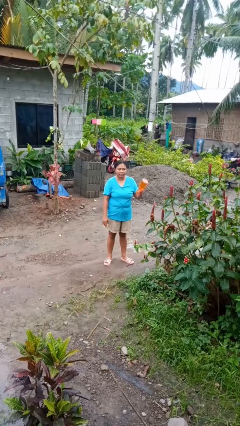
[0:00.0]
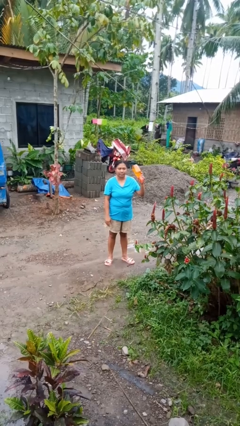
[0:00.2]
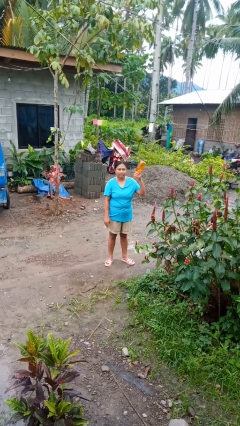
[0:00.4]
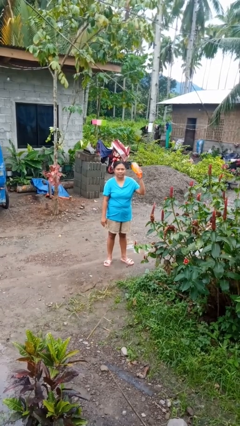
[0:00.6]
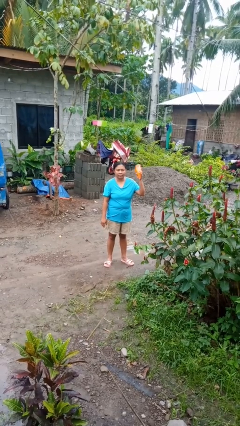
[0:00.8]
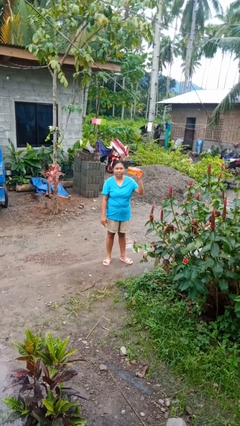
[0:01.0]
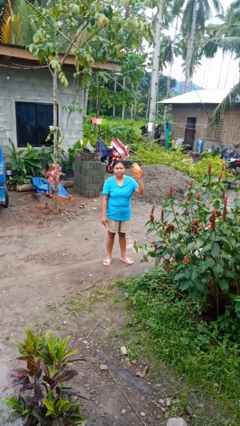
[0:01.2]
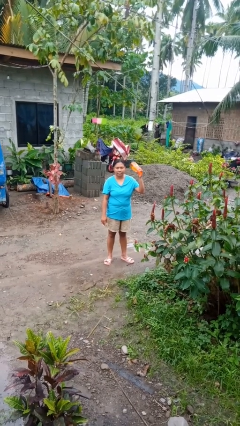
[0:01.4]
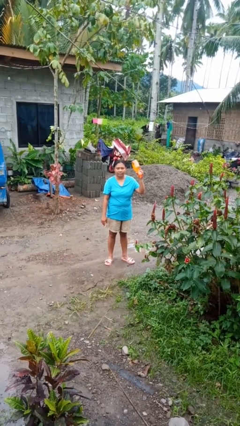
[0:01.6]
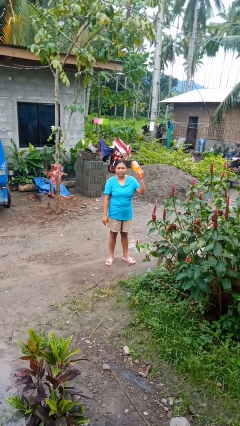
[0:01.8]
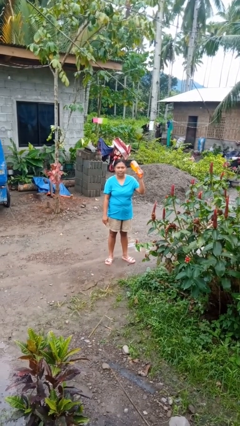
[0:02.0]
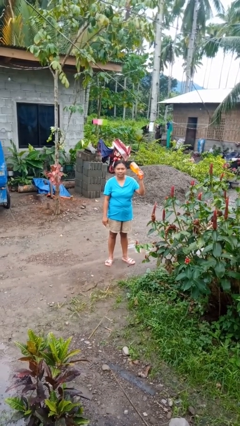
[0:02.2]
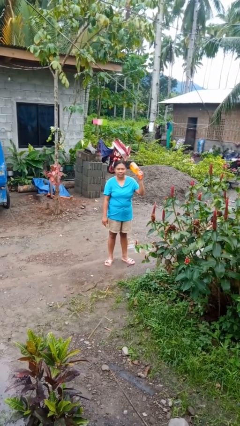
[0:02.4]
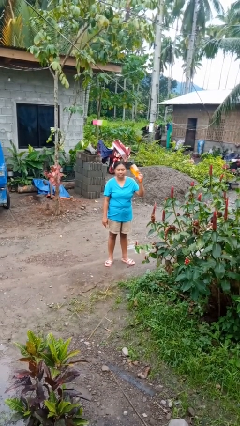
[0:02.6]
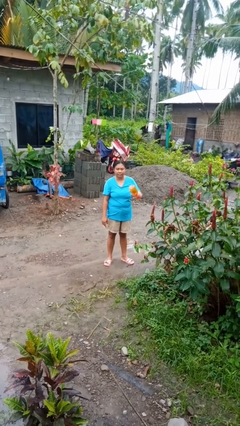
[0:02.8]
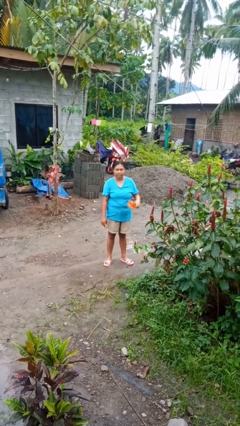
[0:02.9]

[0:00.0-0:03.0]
person holds object above head

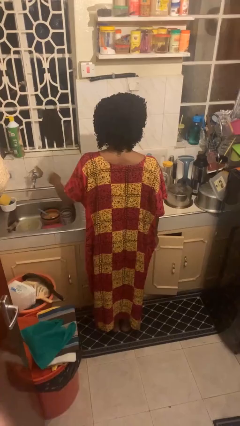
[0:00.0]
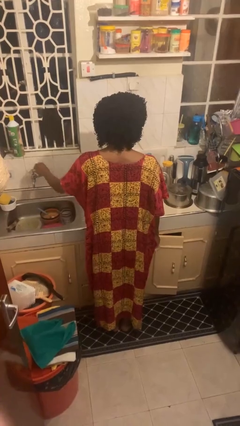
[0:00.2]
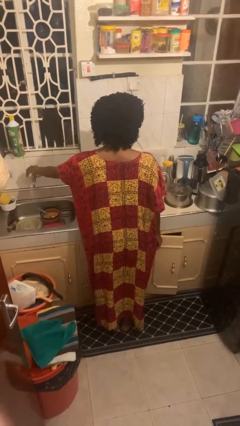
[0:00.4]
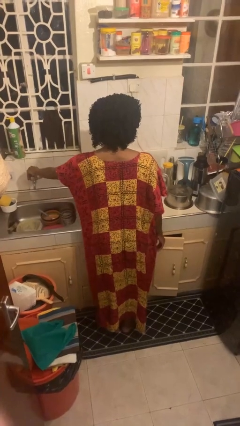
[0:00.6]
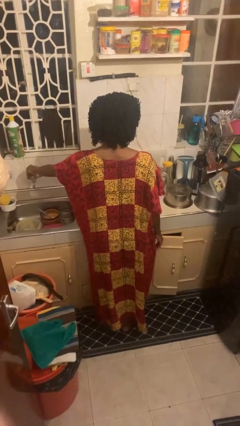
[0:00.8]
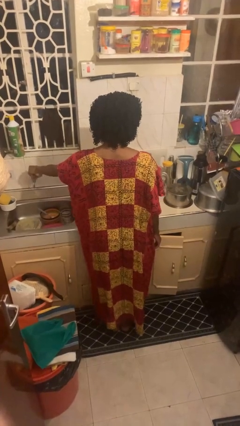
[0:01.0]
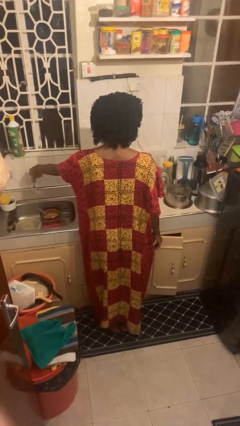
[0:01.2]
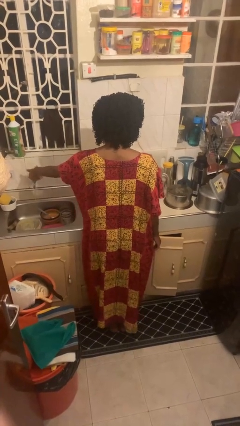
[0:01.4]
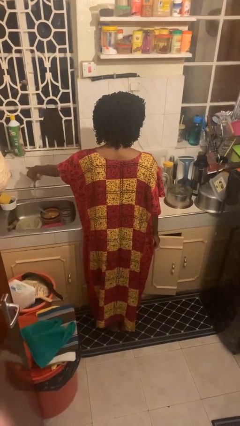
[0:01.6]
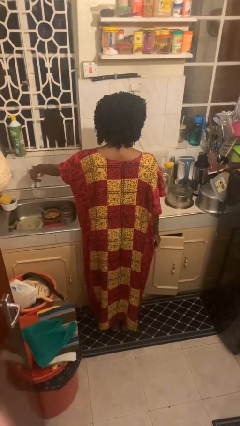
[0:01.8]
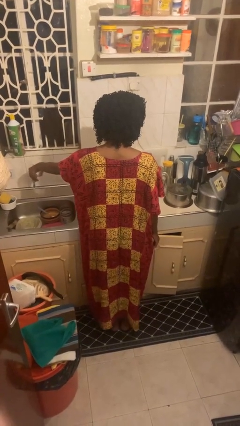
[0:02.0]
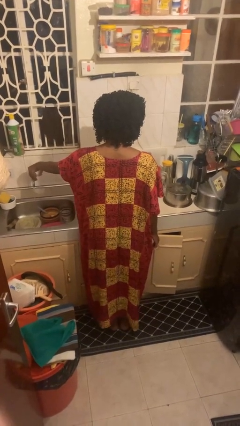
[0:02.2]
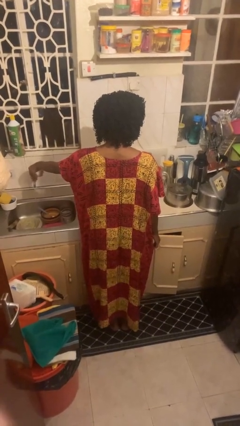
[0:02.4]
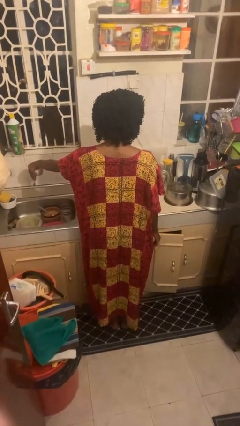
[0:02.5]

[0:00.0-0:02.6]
person turns on faucet

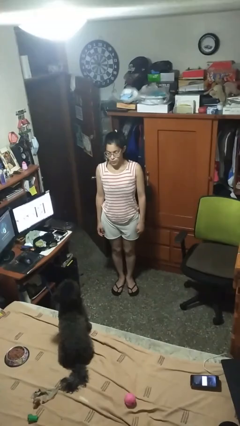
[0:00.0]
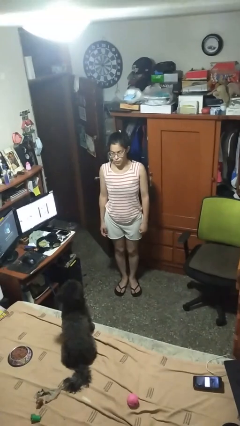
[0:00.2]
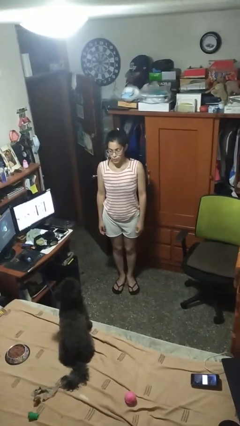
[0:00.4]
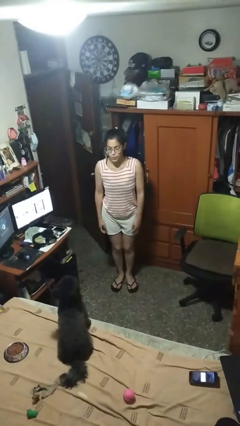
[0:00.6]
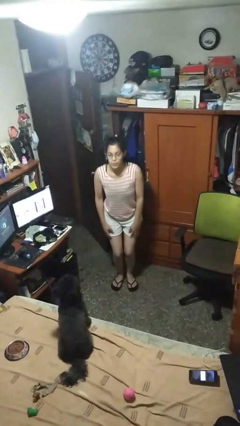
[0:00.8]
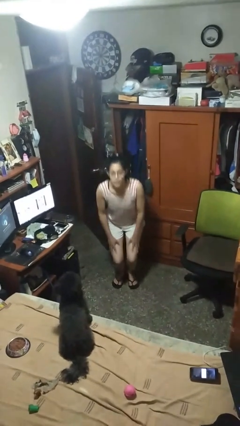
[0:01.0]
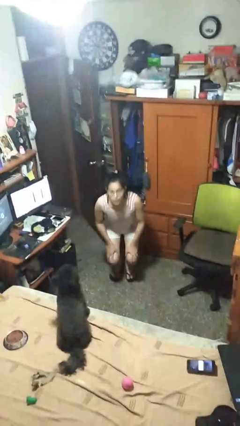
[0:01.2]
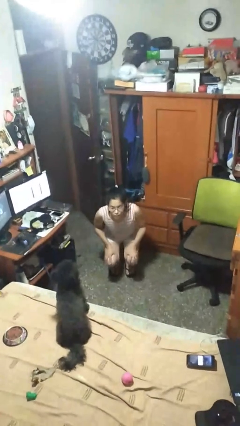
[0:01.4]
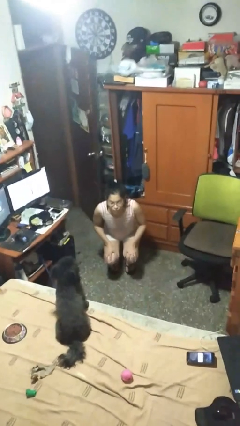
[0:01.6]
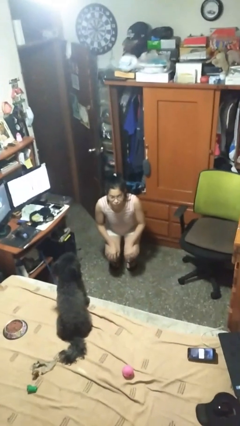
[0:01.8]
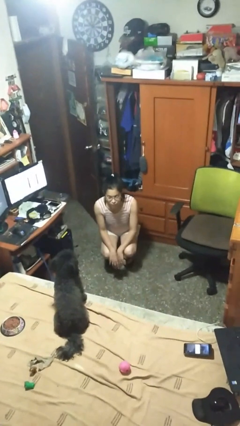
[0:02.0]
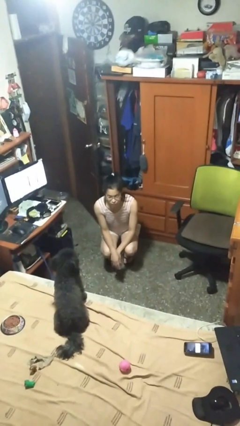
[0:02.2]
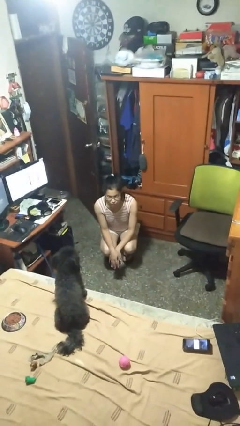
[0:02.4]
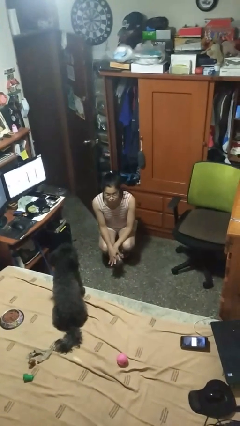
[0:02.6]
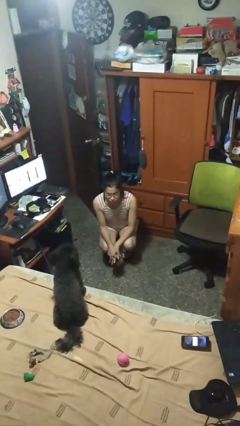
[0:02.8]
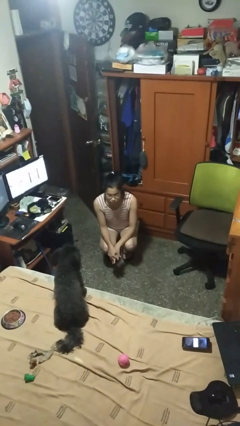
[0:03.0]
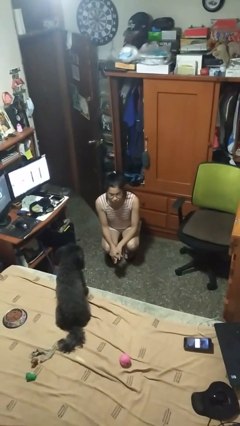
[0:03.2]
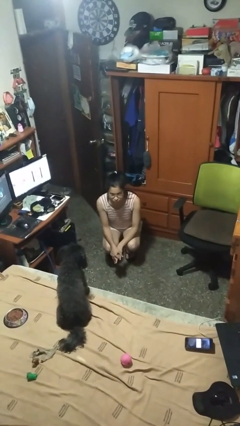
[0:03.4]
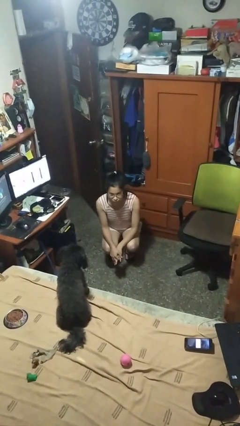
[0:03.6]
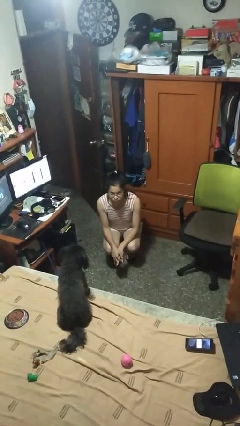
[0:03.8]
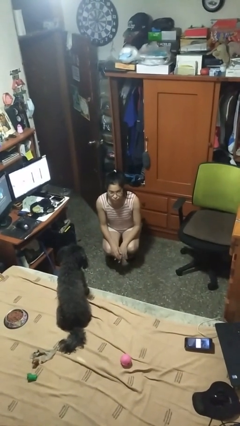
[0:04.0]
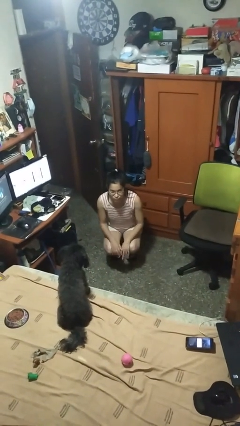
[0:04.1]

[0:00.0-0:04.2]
person squats

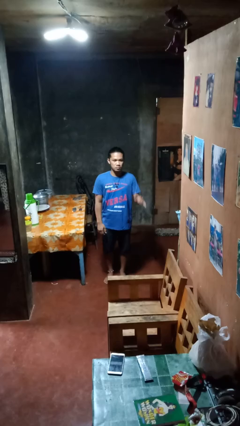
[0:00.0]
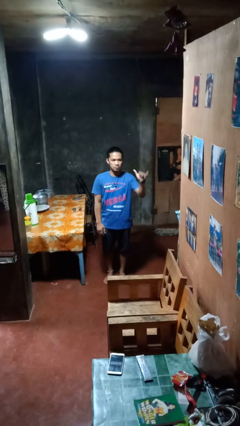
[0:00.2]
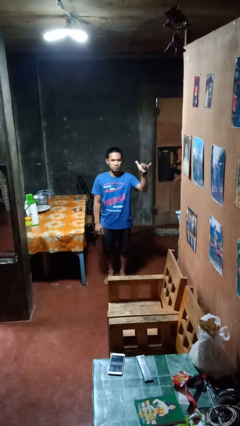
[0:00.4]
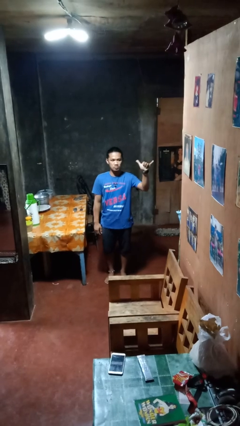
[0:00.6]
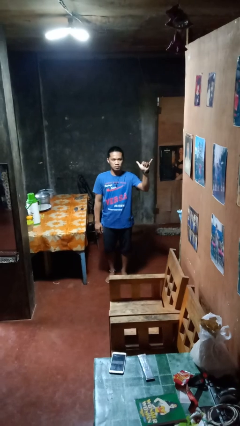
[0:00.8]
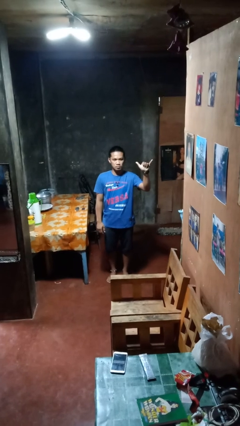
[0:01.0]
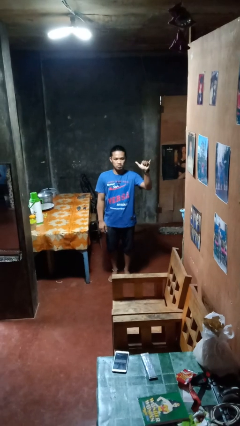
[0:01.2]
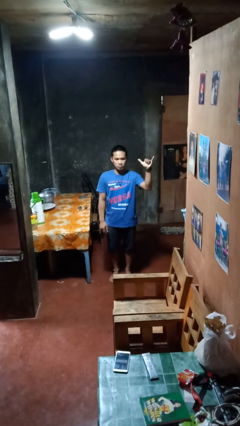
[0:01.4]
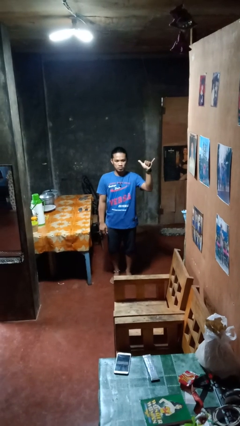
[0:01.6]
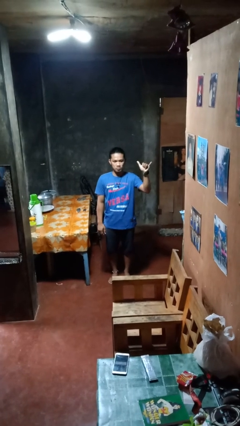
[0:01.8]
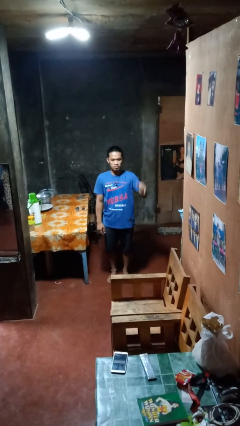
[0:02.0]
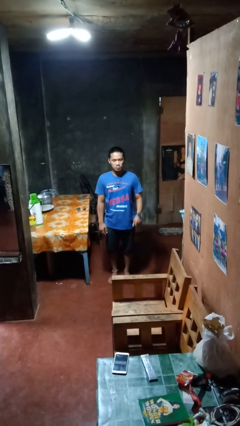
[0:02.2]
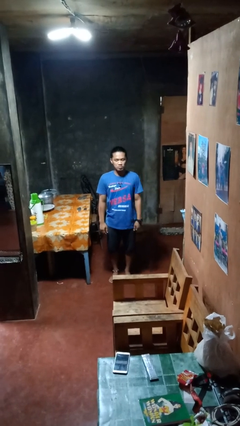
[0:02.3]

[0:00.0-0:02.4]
person gestures hang loose

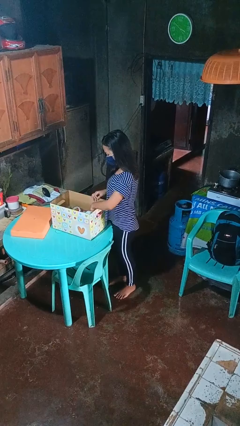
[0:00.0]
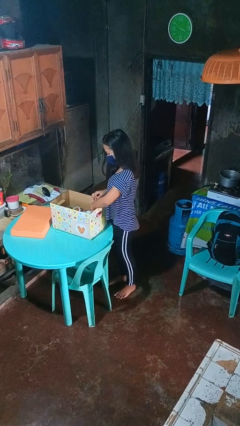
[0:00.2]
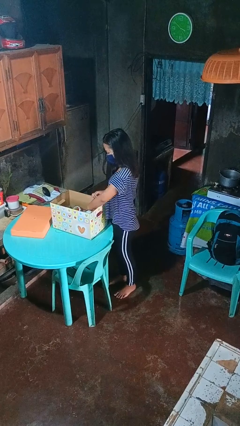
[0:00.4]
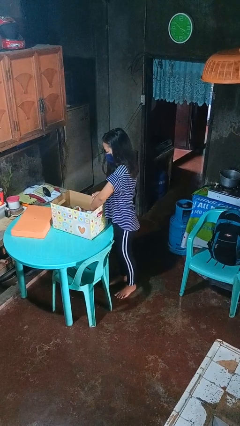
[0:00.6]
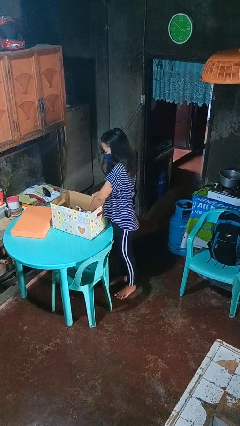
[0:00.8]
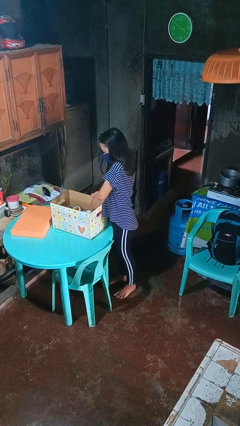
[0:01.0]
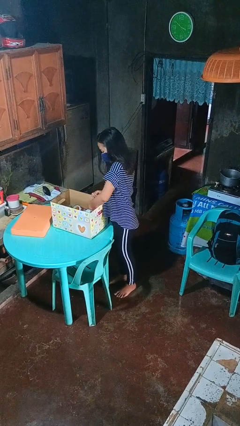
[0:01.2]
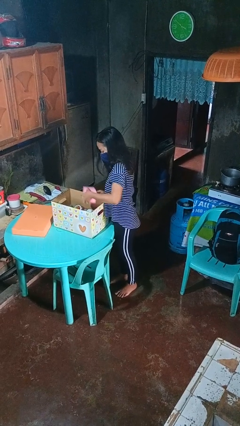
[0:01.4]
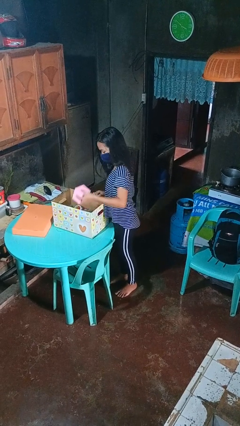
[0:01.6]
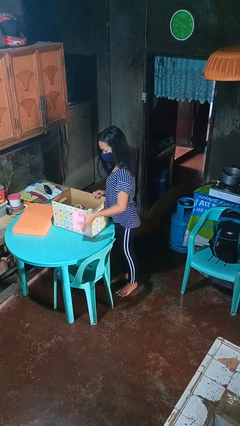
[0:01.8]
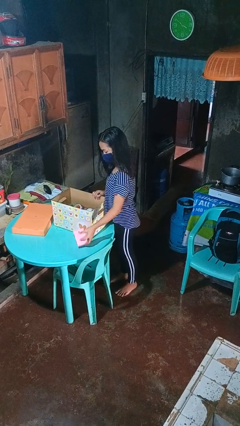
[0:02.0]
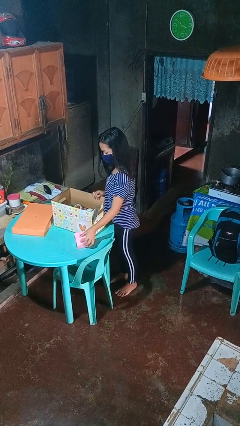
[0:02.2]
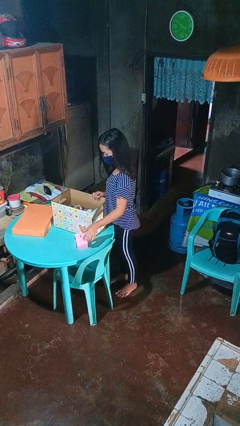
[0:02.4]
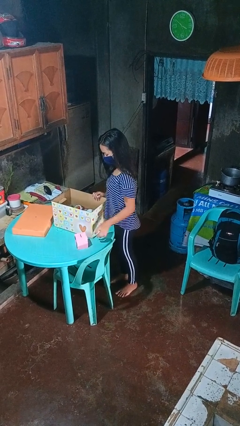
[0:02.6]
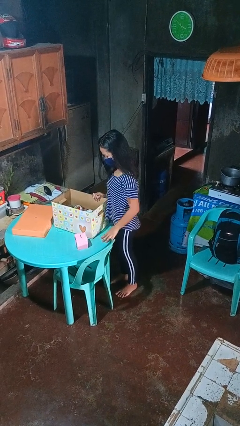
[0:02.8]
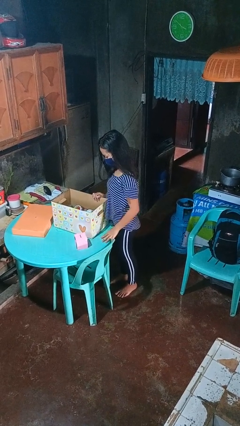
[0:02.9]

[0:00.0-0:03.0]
person takes object from box

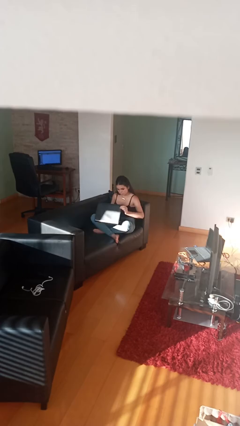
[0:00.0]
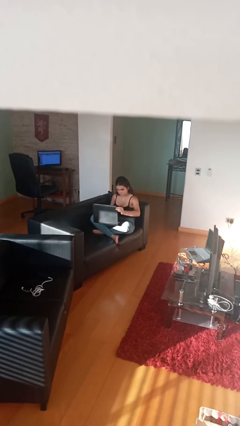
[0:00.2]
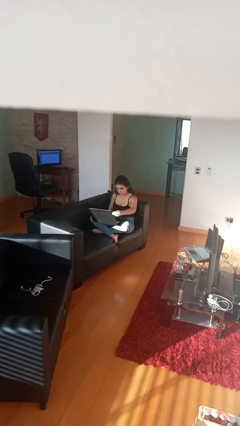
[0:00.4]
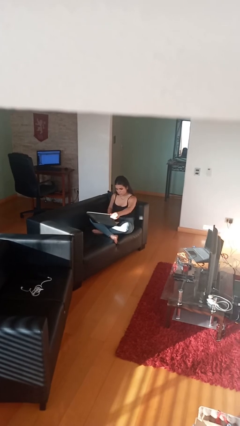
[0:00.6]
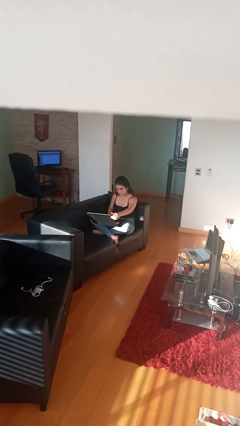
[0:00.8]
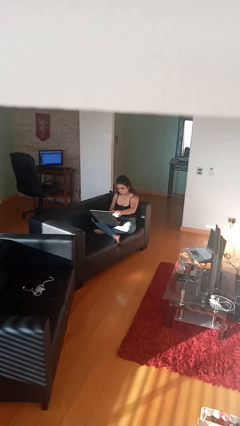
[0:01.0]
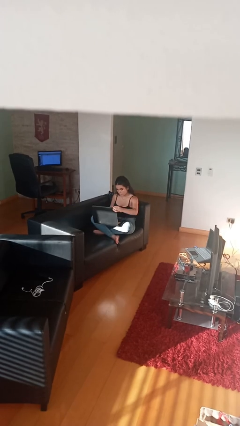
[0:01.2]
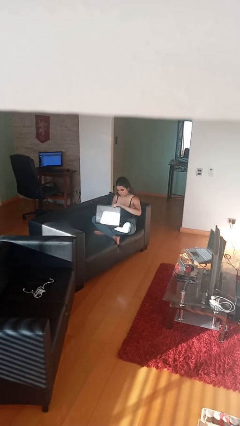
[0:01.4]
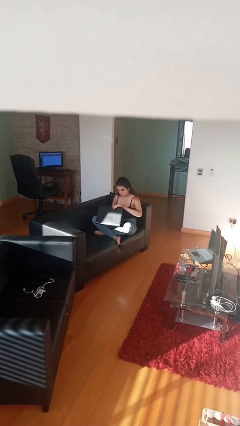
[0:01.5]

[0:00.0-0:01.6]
person interacts with laptop
